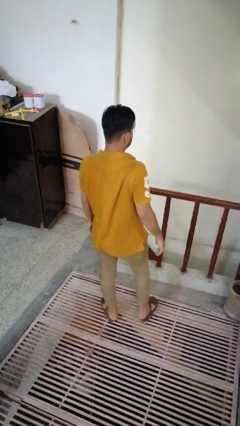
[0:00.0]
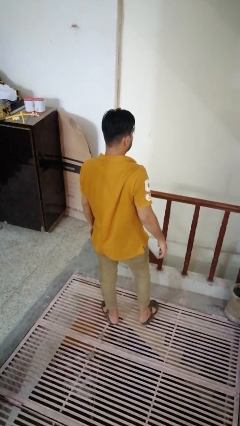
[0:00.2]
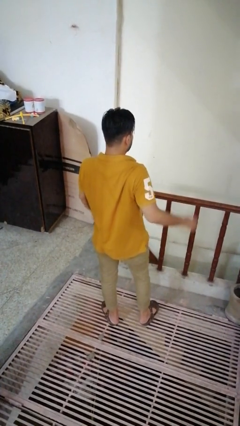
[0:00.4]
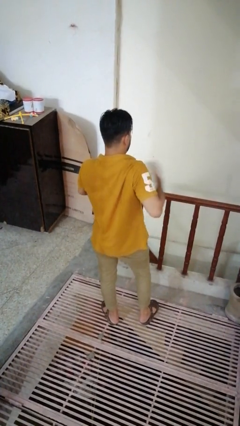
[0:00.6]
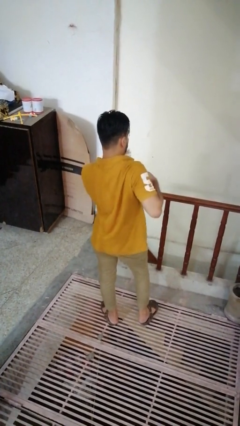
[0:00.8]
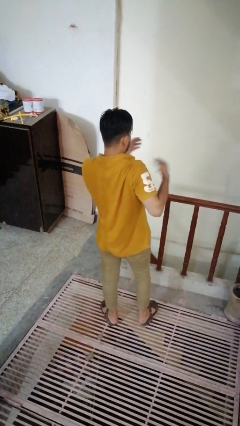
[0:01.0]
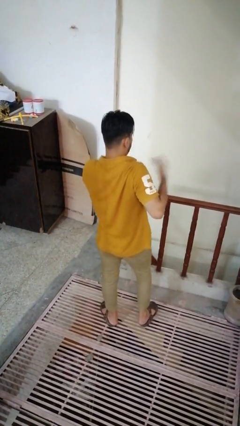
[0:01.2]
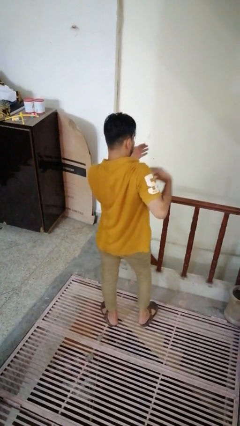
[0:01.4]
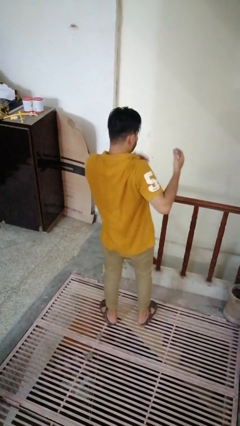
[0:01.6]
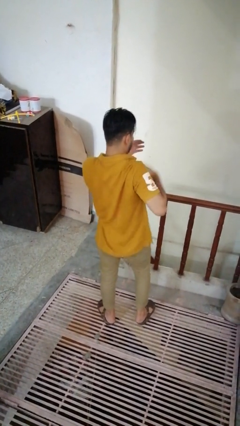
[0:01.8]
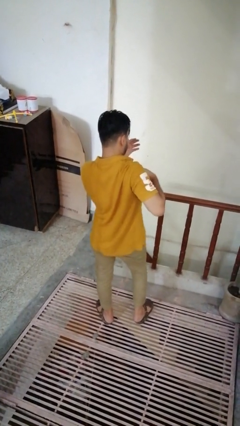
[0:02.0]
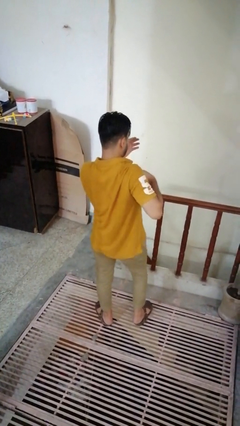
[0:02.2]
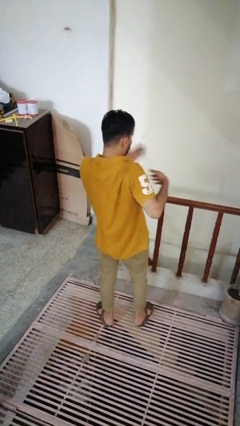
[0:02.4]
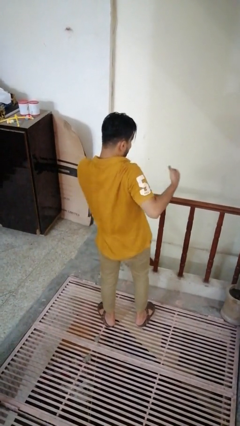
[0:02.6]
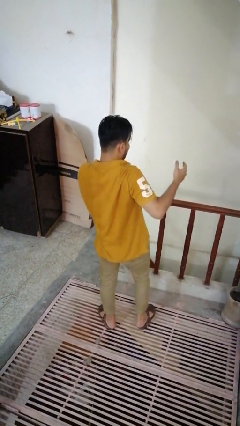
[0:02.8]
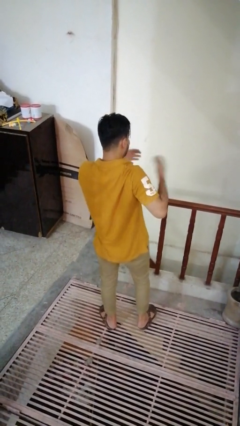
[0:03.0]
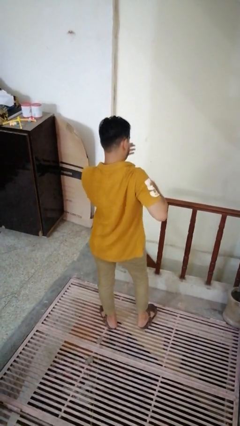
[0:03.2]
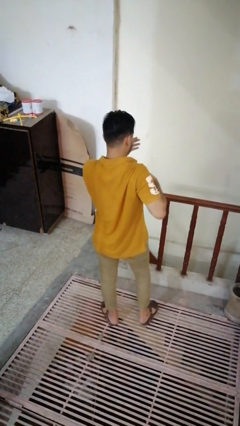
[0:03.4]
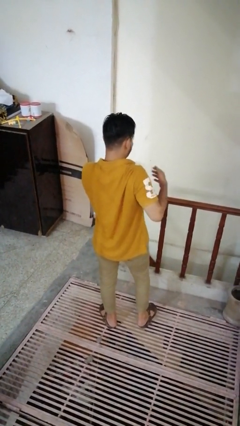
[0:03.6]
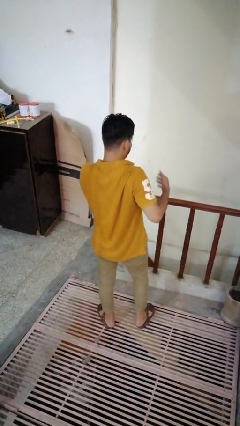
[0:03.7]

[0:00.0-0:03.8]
person drums on chest

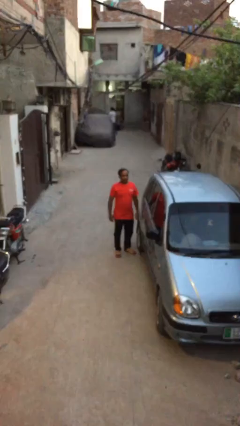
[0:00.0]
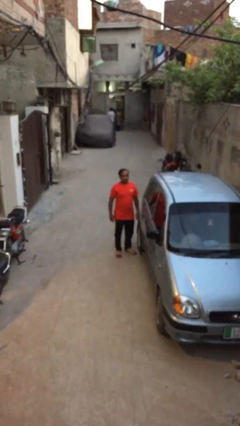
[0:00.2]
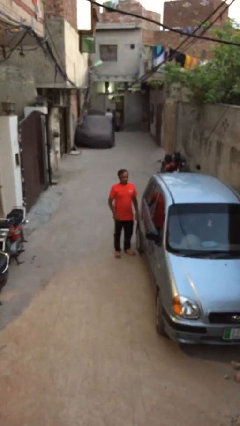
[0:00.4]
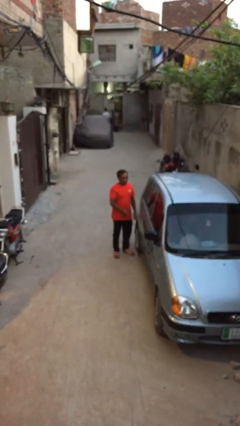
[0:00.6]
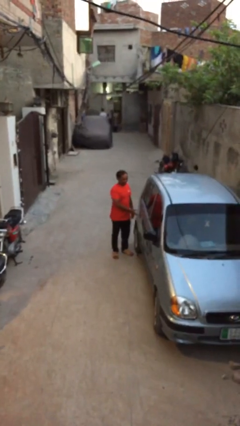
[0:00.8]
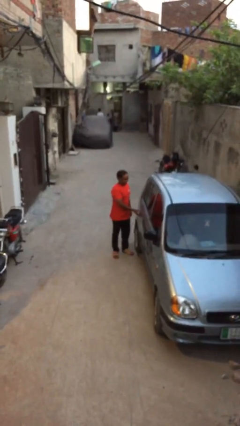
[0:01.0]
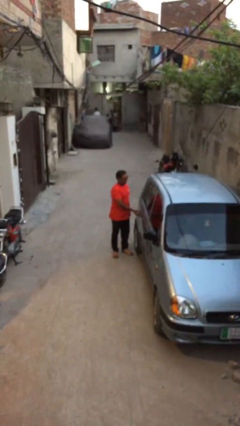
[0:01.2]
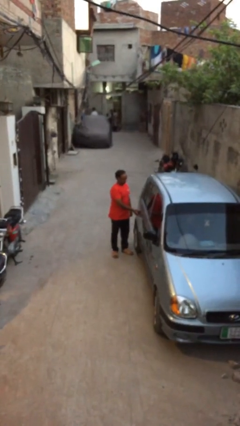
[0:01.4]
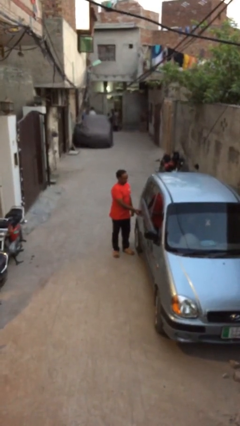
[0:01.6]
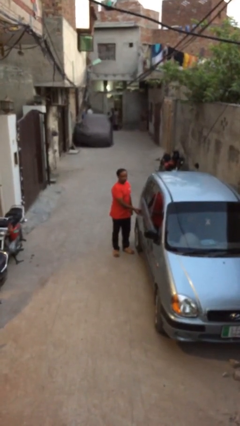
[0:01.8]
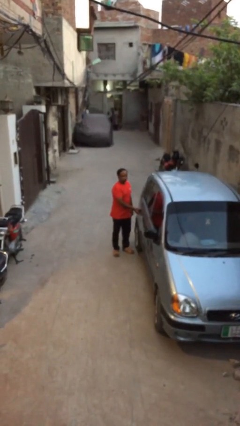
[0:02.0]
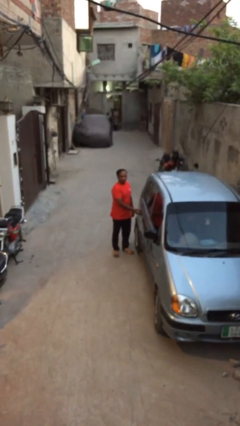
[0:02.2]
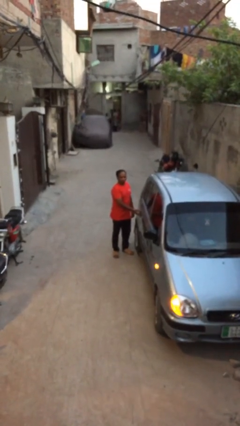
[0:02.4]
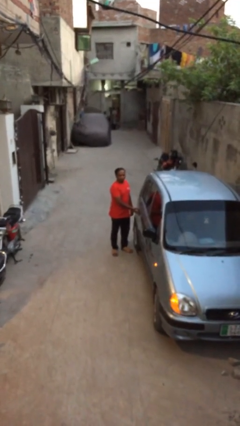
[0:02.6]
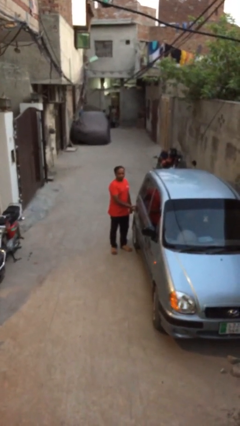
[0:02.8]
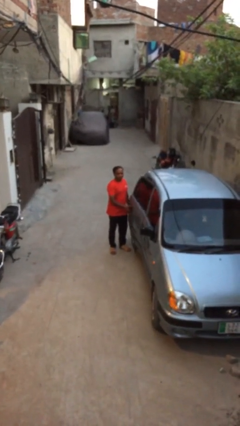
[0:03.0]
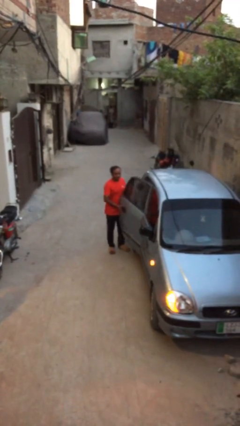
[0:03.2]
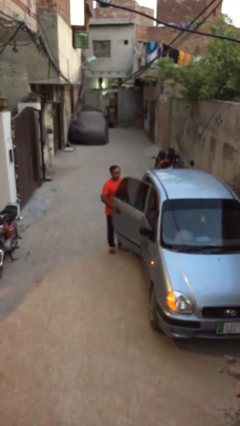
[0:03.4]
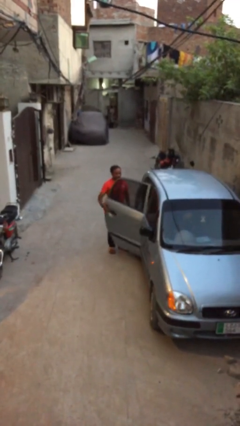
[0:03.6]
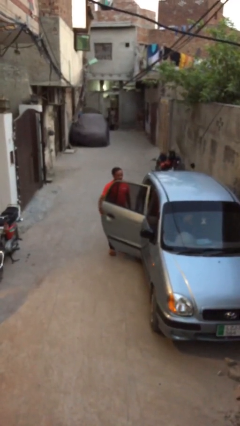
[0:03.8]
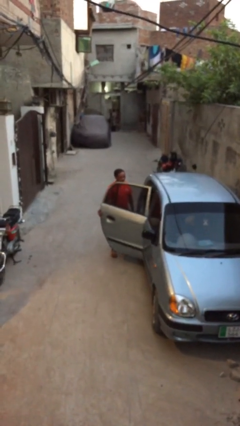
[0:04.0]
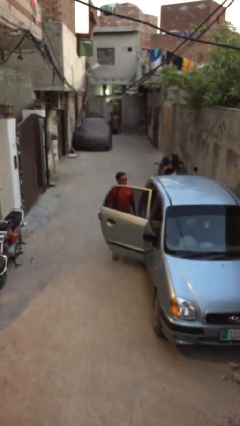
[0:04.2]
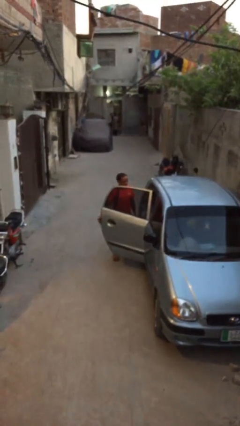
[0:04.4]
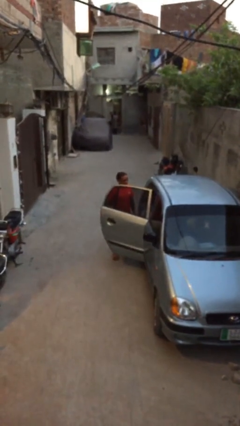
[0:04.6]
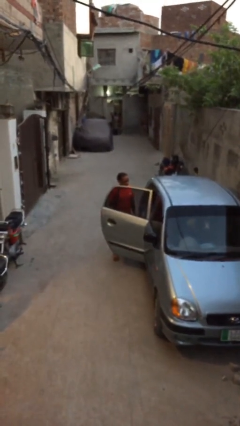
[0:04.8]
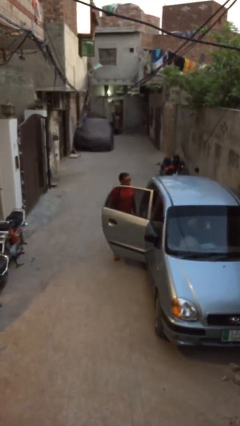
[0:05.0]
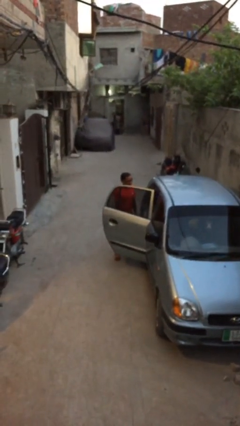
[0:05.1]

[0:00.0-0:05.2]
person opens car door

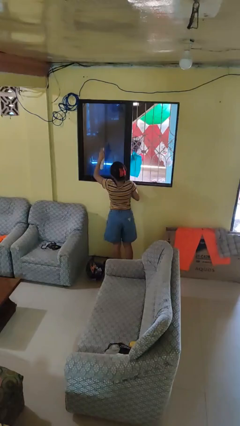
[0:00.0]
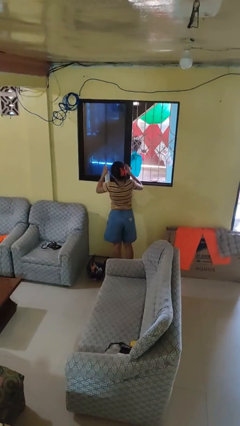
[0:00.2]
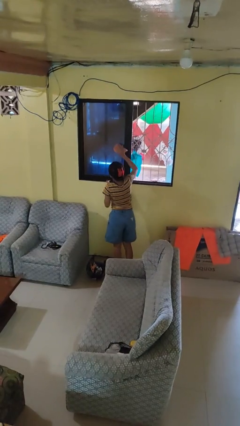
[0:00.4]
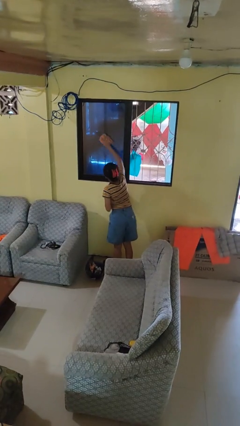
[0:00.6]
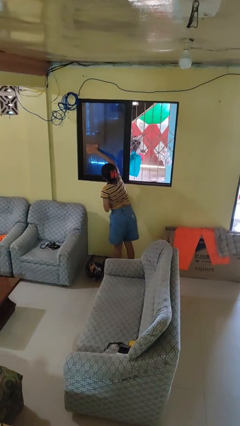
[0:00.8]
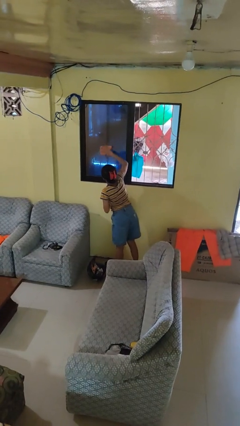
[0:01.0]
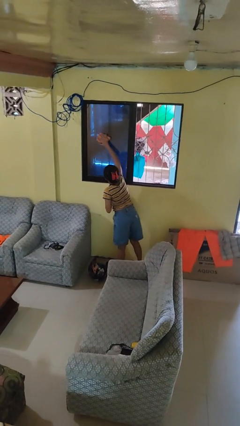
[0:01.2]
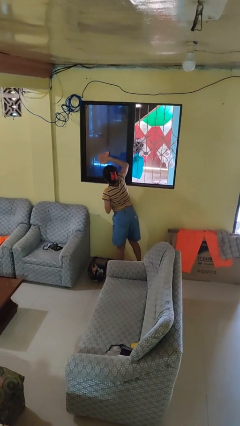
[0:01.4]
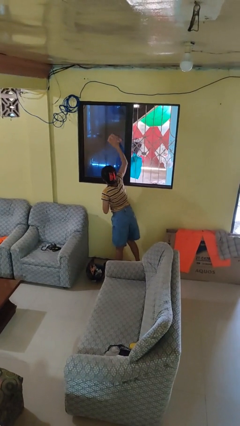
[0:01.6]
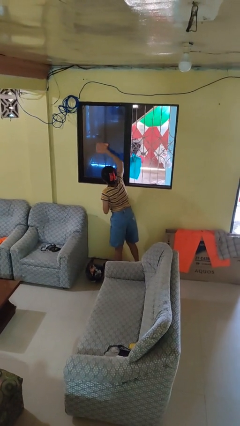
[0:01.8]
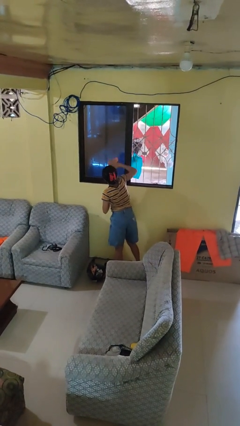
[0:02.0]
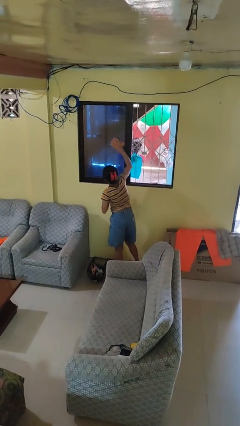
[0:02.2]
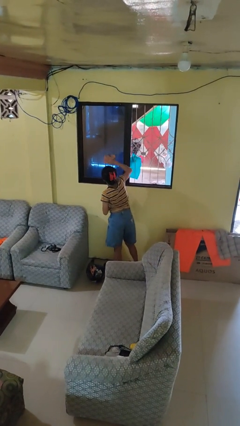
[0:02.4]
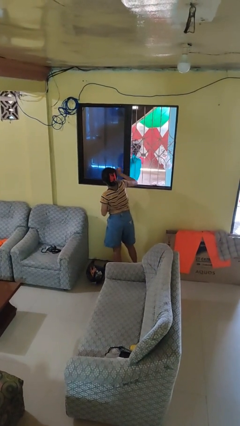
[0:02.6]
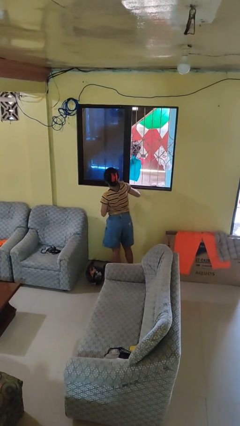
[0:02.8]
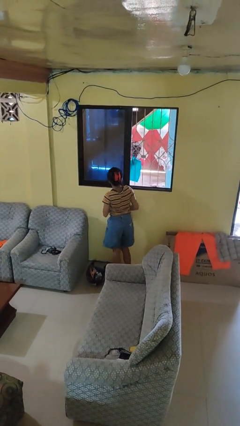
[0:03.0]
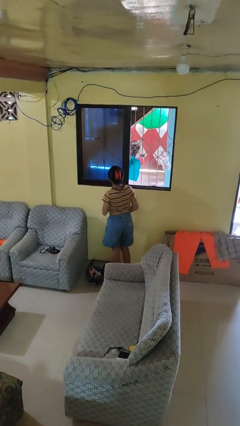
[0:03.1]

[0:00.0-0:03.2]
person washes window

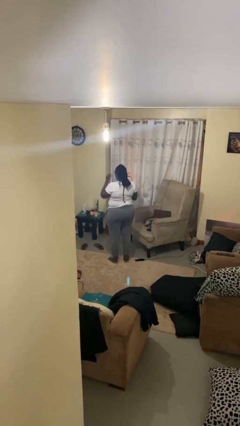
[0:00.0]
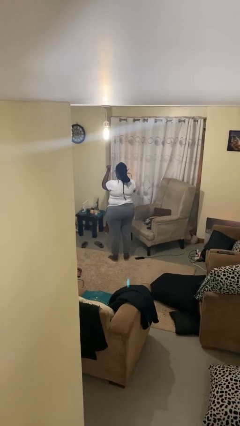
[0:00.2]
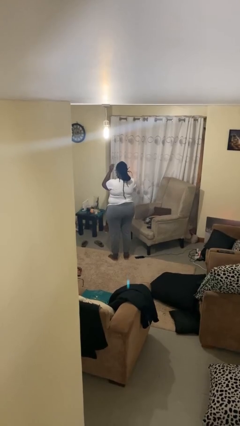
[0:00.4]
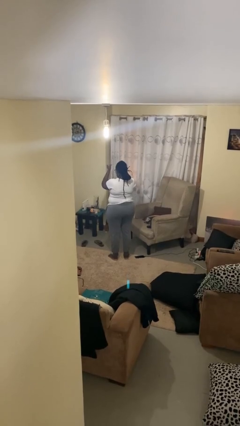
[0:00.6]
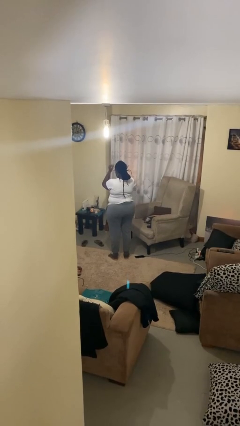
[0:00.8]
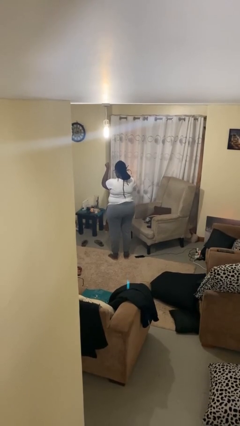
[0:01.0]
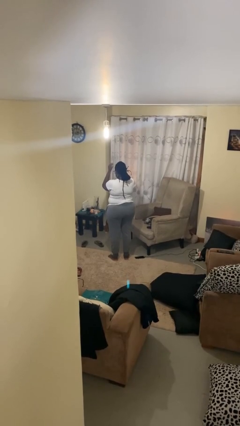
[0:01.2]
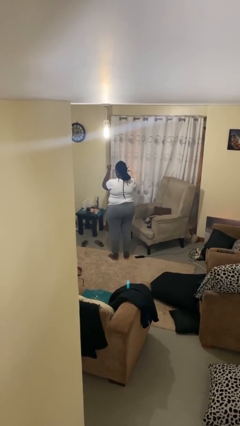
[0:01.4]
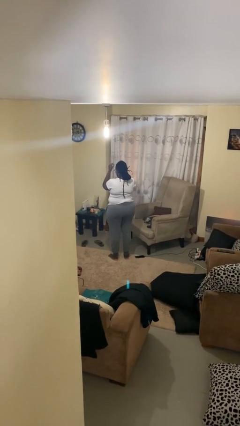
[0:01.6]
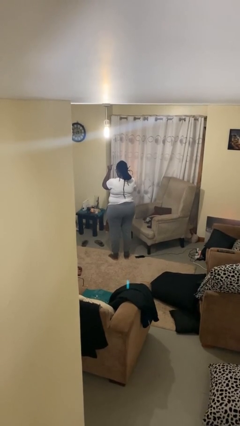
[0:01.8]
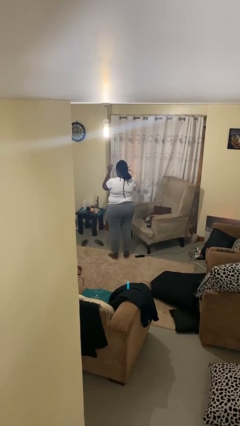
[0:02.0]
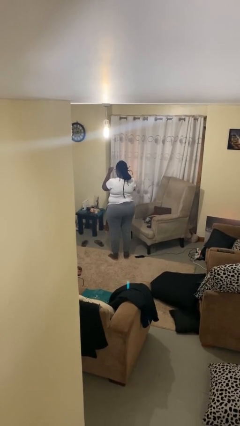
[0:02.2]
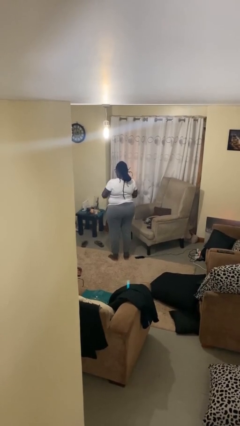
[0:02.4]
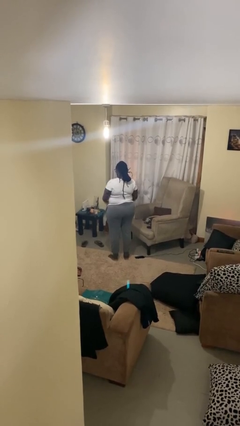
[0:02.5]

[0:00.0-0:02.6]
person snaps fingers

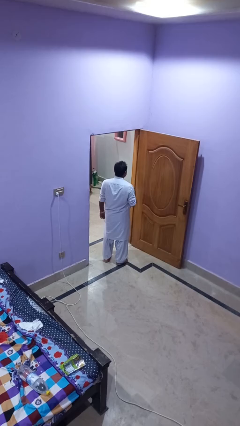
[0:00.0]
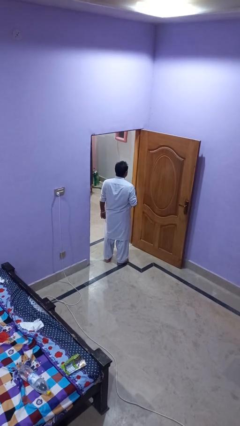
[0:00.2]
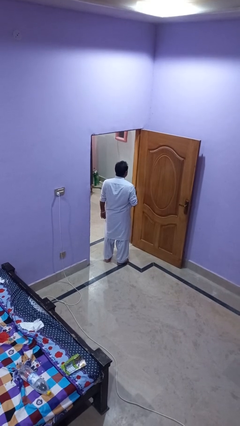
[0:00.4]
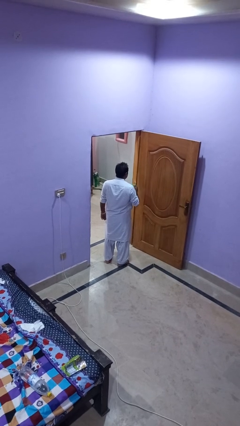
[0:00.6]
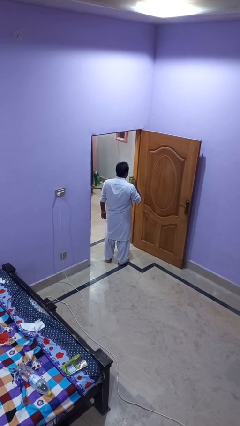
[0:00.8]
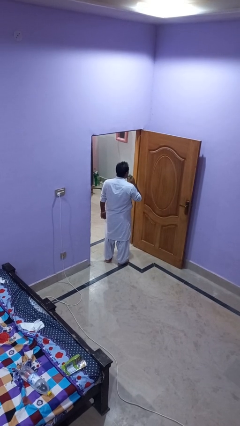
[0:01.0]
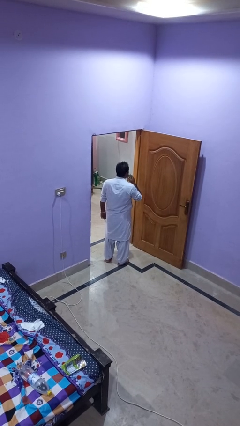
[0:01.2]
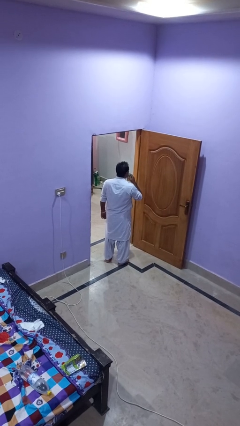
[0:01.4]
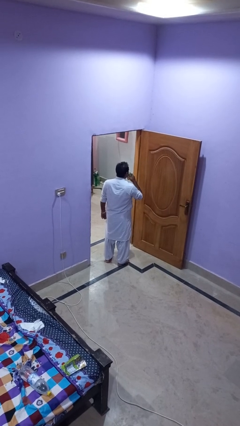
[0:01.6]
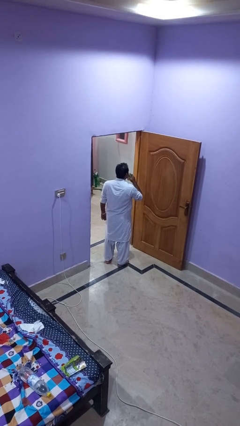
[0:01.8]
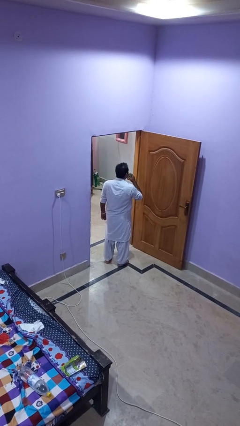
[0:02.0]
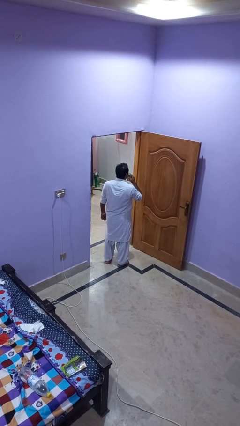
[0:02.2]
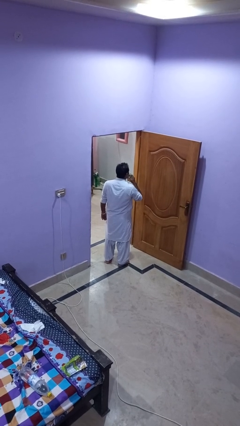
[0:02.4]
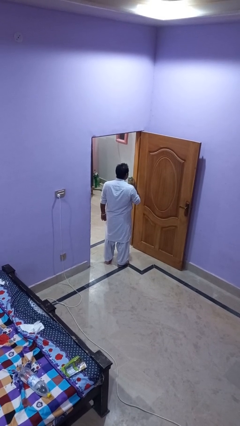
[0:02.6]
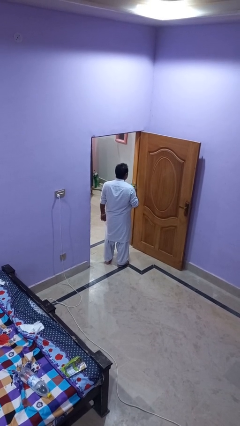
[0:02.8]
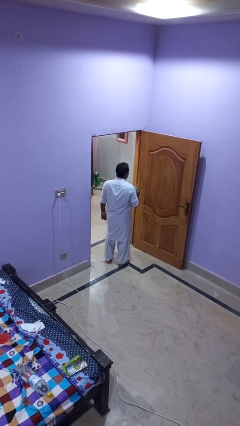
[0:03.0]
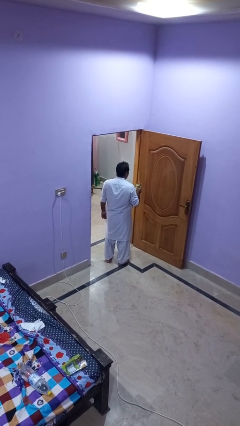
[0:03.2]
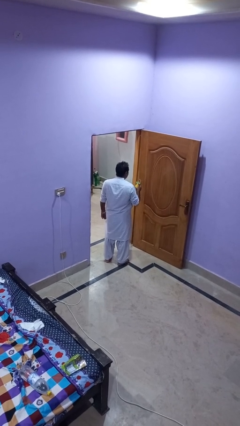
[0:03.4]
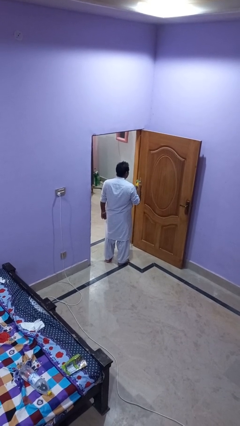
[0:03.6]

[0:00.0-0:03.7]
person drinks from straw
